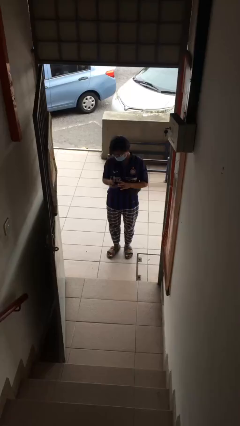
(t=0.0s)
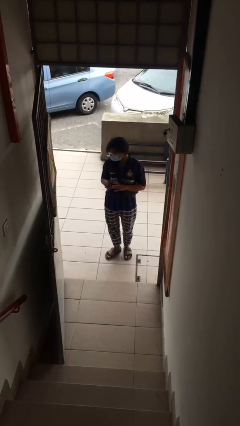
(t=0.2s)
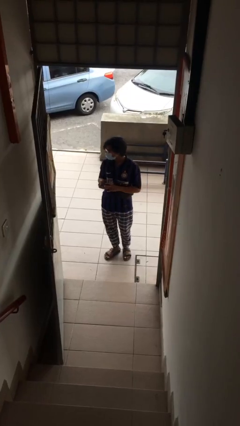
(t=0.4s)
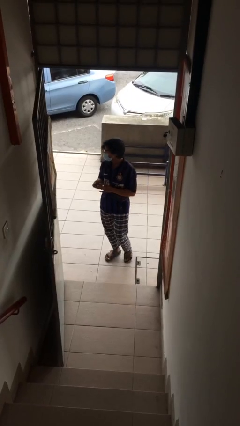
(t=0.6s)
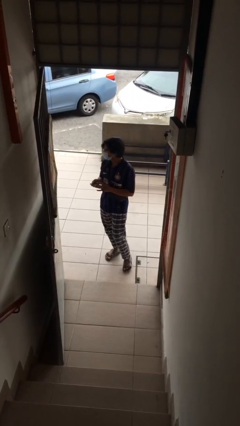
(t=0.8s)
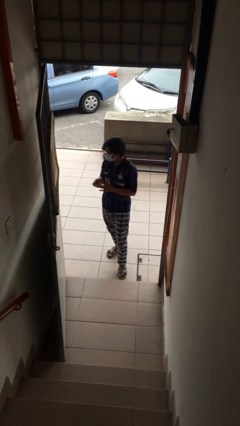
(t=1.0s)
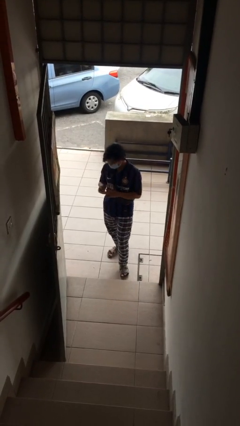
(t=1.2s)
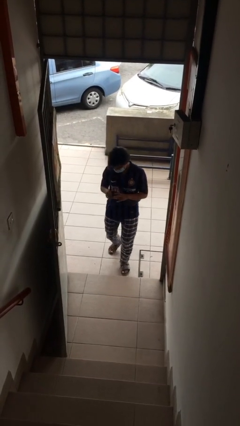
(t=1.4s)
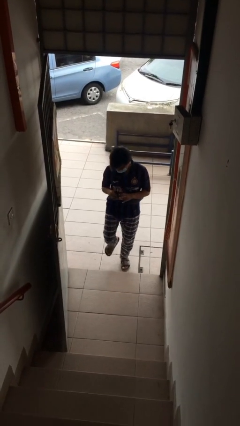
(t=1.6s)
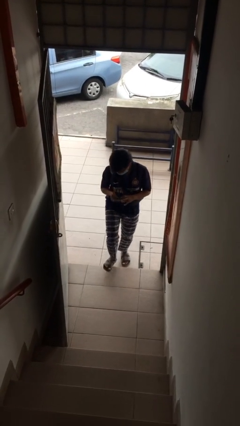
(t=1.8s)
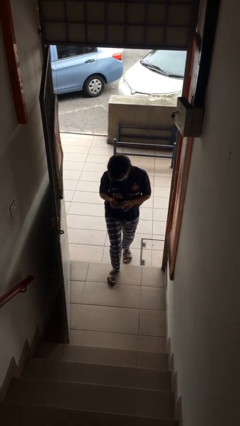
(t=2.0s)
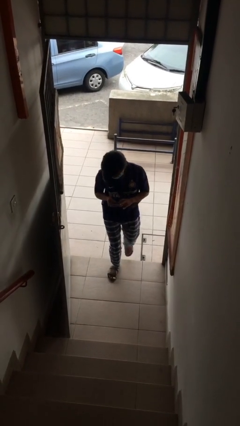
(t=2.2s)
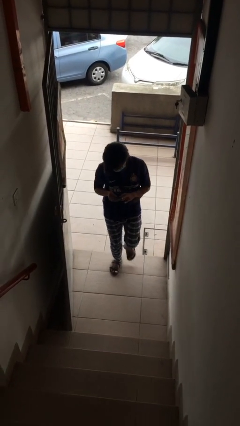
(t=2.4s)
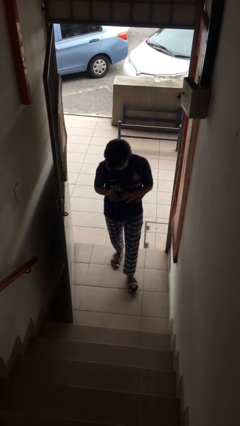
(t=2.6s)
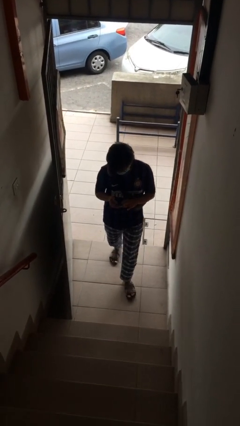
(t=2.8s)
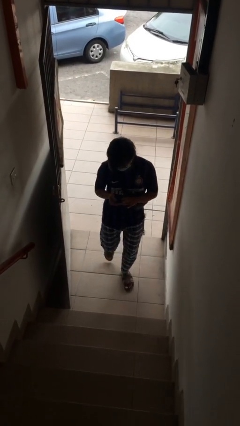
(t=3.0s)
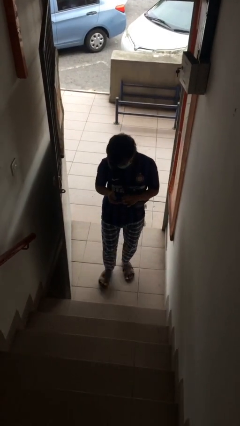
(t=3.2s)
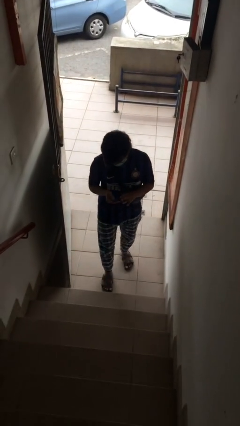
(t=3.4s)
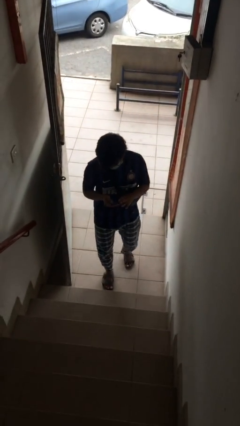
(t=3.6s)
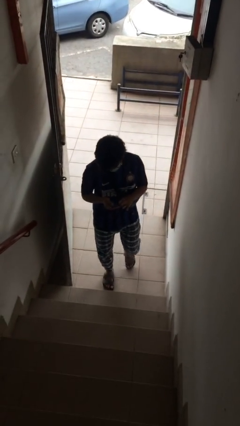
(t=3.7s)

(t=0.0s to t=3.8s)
person enters scene through structure

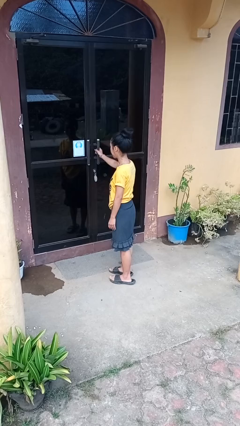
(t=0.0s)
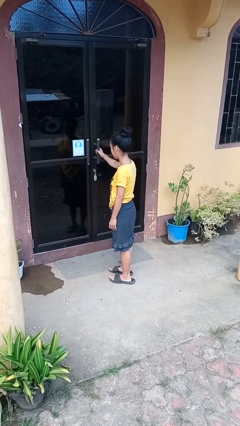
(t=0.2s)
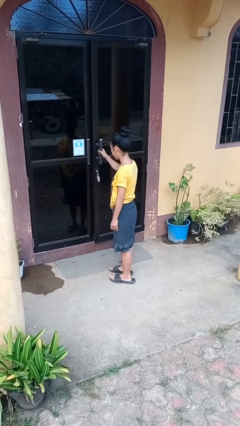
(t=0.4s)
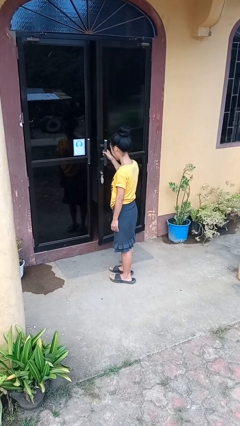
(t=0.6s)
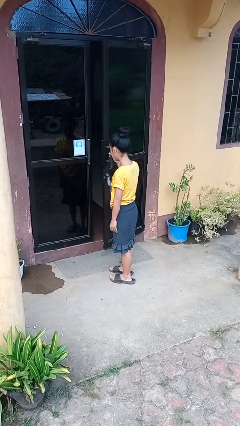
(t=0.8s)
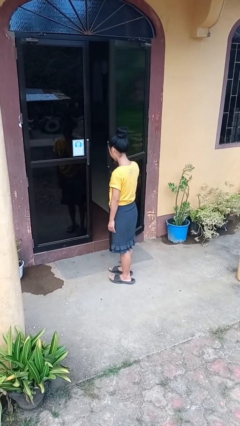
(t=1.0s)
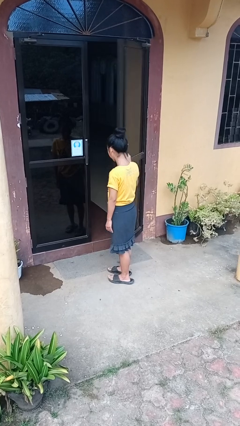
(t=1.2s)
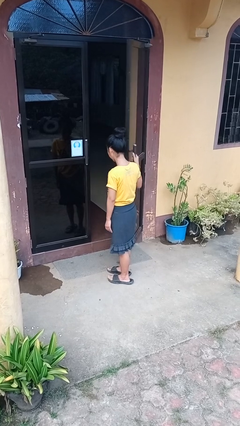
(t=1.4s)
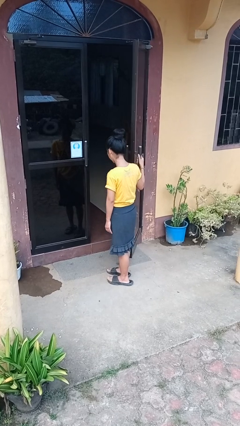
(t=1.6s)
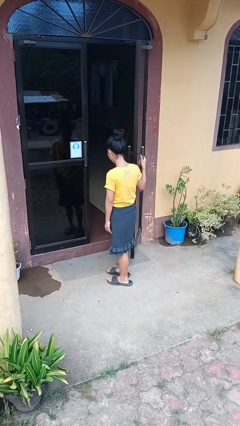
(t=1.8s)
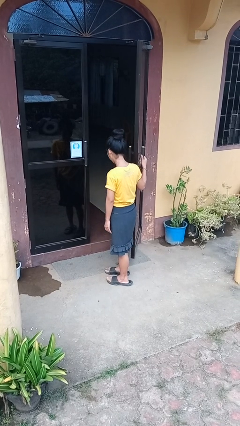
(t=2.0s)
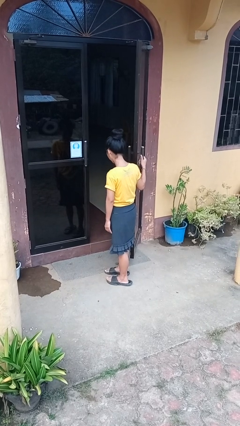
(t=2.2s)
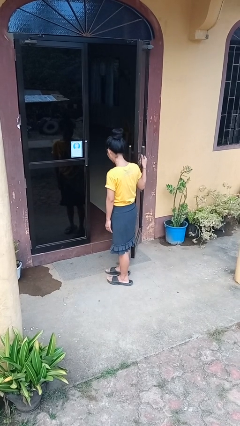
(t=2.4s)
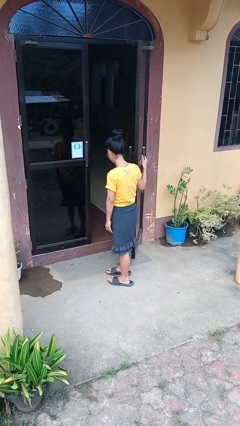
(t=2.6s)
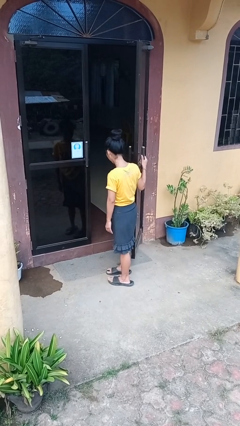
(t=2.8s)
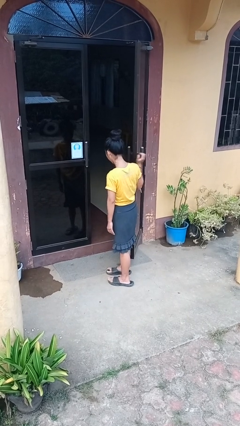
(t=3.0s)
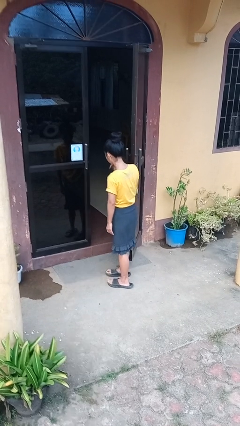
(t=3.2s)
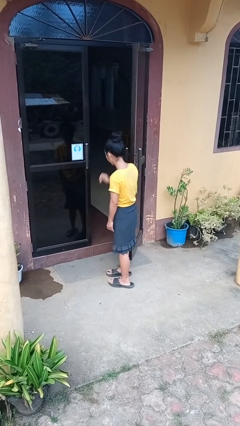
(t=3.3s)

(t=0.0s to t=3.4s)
person opens facility door

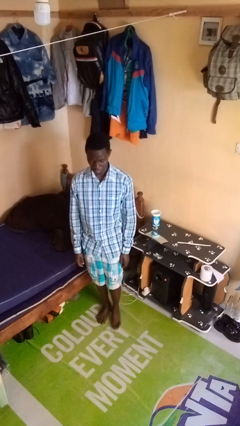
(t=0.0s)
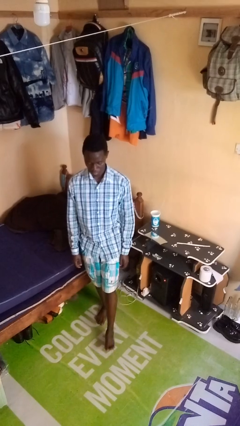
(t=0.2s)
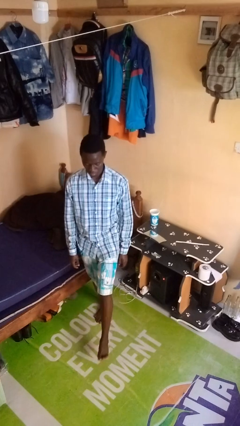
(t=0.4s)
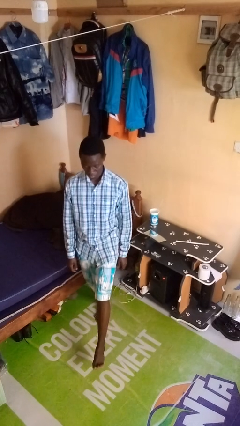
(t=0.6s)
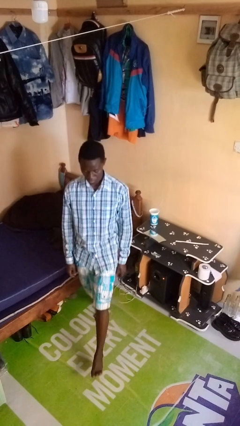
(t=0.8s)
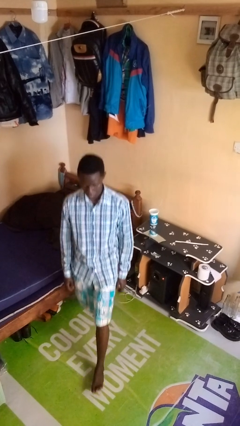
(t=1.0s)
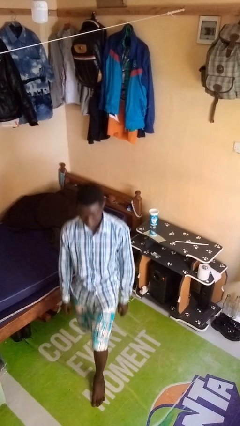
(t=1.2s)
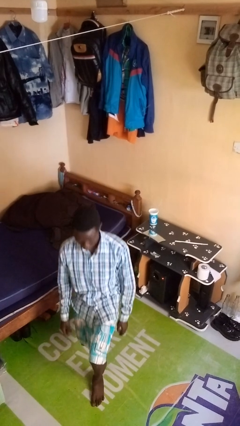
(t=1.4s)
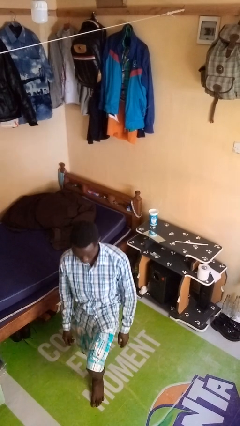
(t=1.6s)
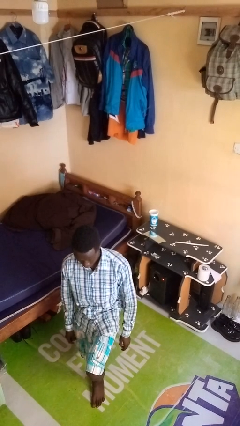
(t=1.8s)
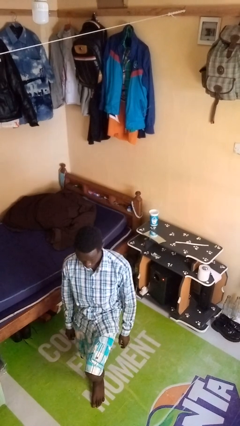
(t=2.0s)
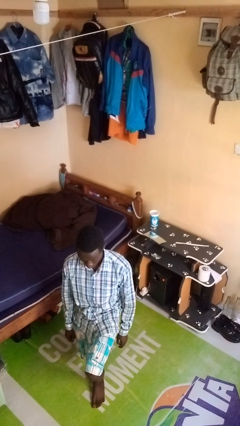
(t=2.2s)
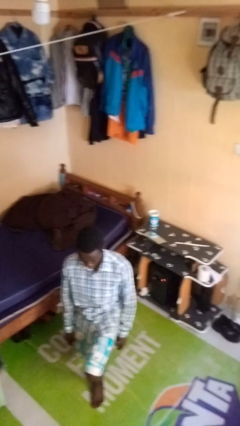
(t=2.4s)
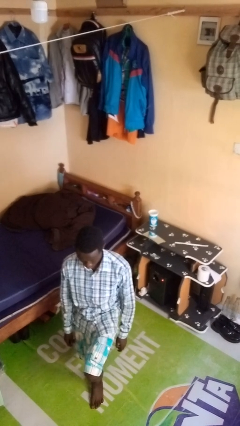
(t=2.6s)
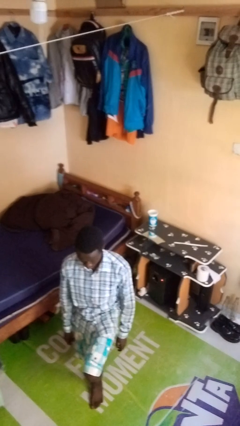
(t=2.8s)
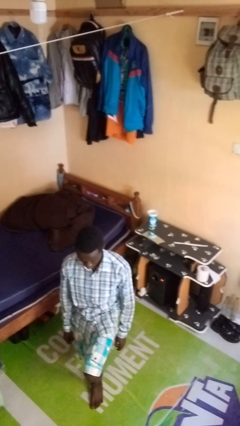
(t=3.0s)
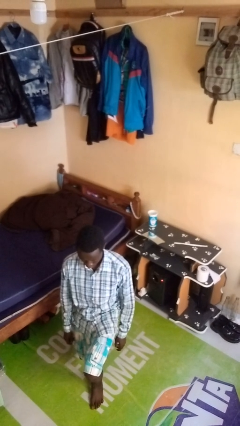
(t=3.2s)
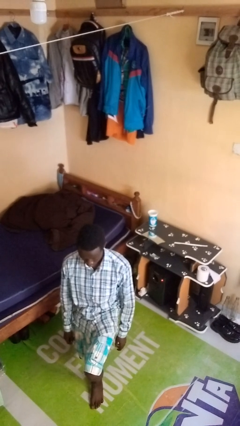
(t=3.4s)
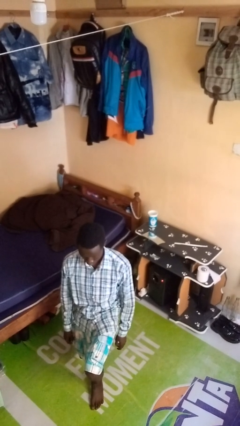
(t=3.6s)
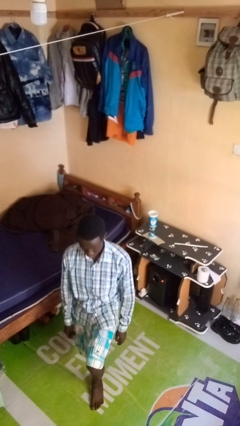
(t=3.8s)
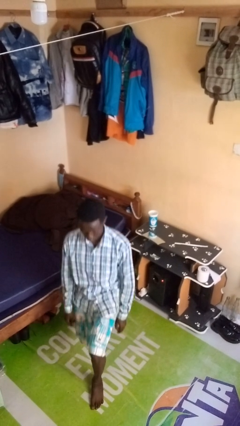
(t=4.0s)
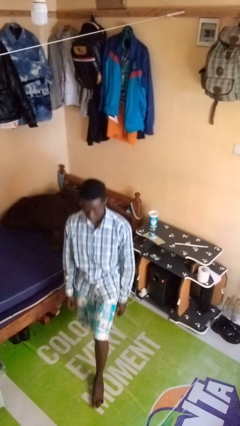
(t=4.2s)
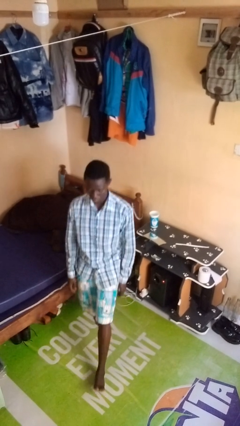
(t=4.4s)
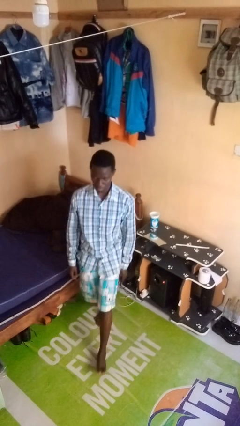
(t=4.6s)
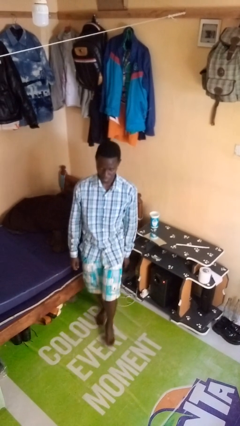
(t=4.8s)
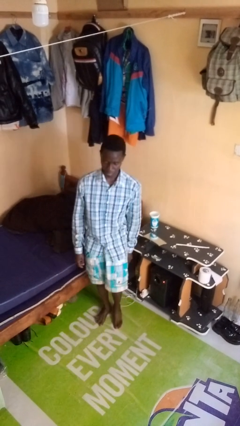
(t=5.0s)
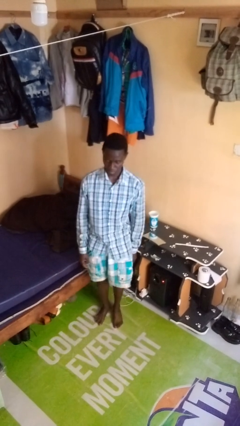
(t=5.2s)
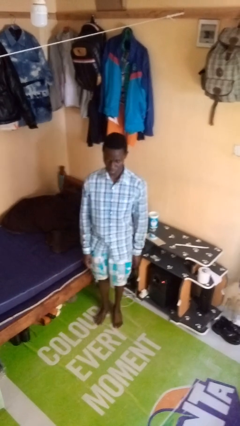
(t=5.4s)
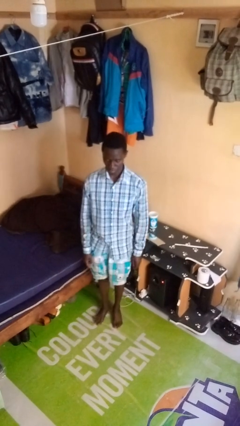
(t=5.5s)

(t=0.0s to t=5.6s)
person exercises with lunges

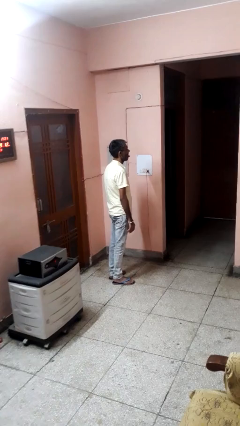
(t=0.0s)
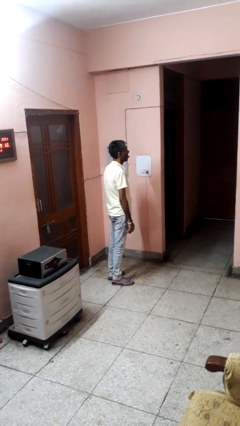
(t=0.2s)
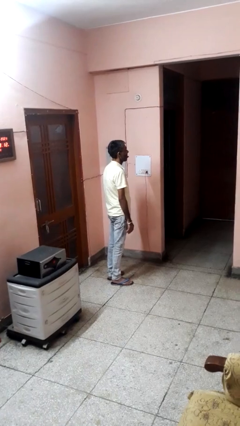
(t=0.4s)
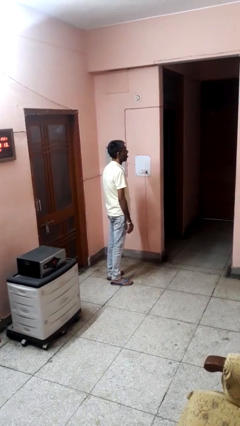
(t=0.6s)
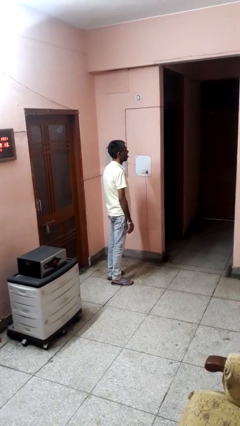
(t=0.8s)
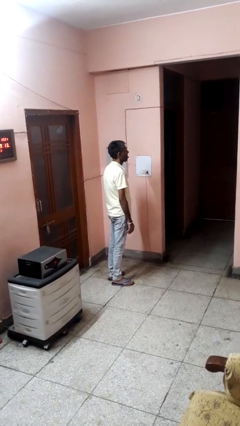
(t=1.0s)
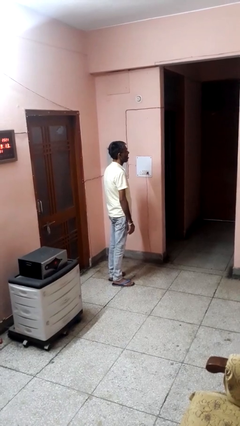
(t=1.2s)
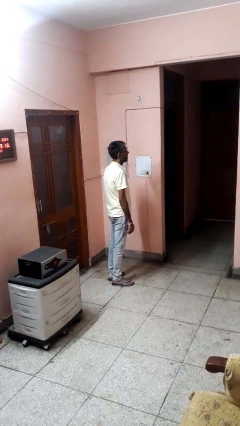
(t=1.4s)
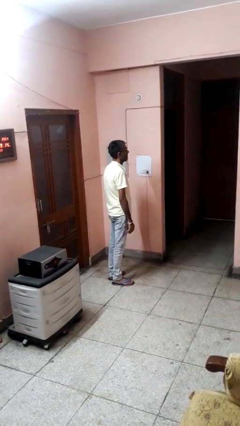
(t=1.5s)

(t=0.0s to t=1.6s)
person sticks out tongue

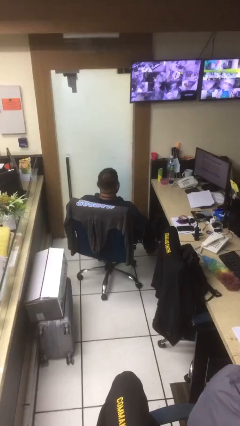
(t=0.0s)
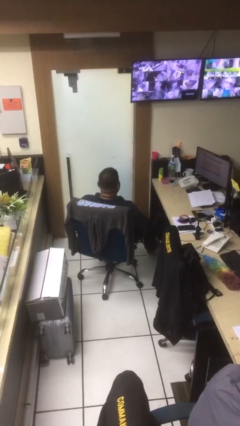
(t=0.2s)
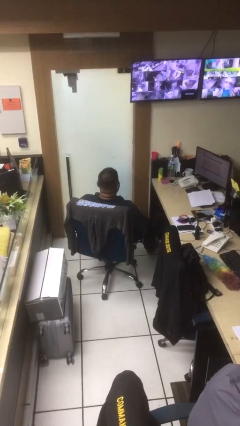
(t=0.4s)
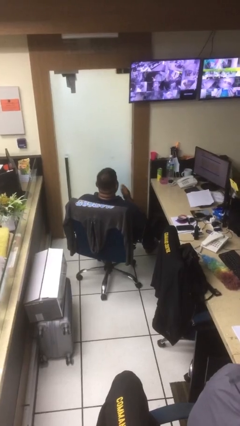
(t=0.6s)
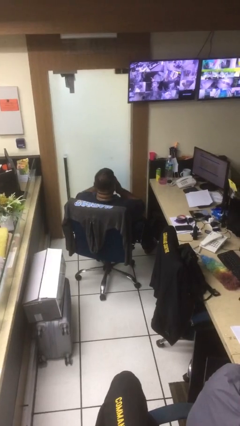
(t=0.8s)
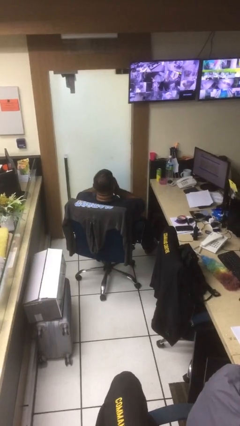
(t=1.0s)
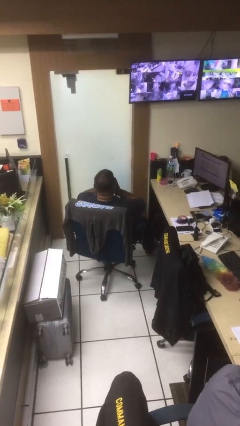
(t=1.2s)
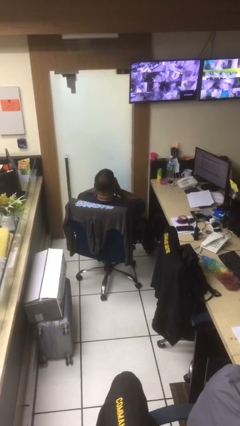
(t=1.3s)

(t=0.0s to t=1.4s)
person covers face with hands

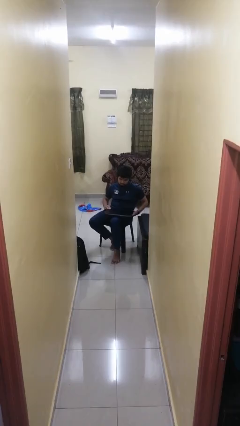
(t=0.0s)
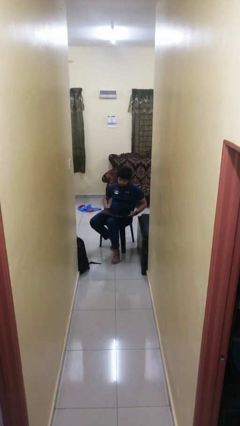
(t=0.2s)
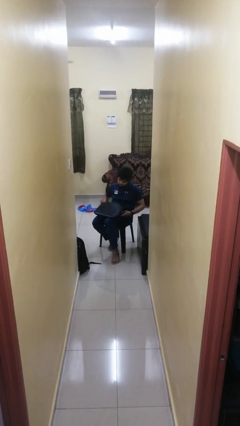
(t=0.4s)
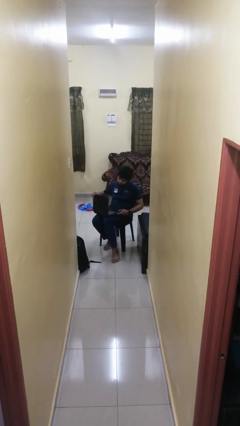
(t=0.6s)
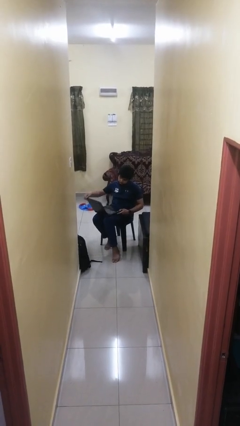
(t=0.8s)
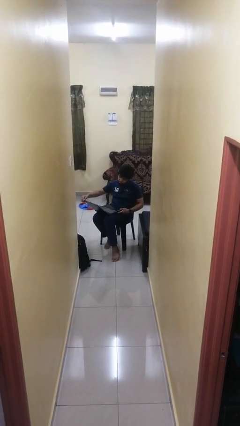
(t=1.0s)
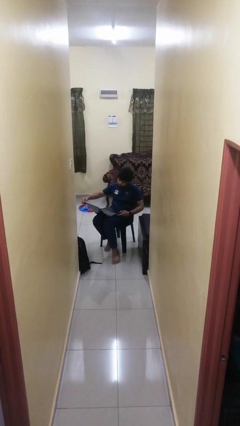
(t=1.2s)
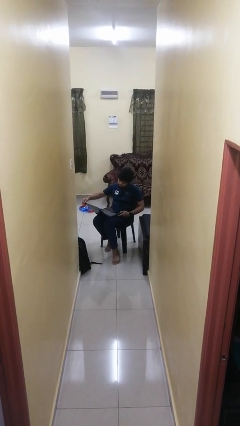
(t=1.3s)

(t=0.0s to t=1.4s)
person opens laptop
